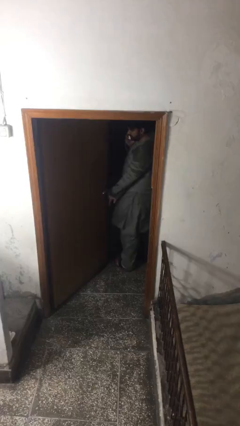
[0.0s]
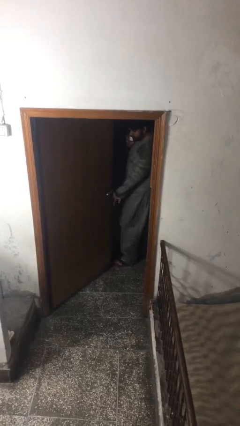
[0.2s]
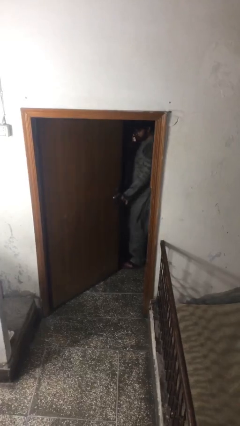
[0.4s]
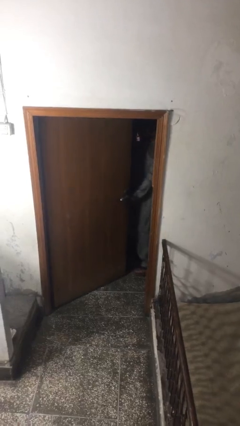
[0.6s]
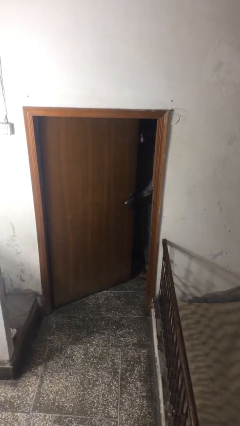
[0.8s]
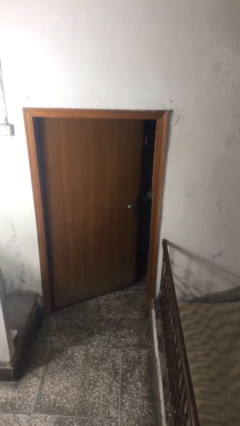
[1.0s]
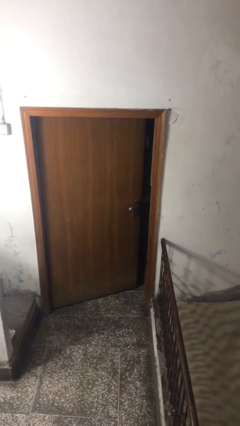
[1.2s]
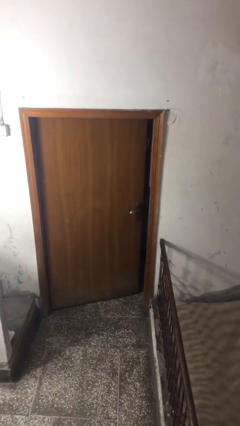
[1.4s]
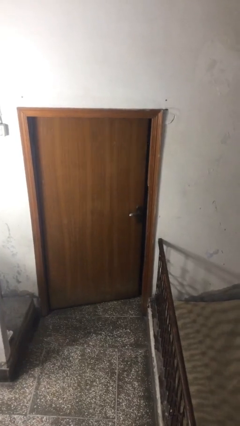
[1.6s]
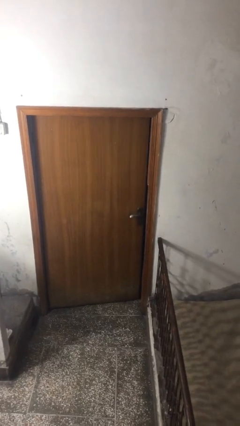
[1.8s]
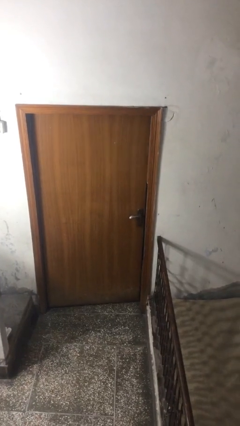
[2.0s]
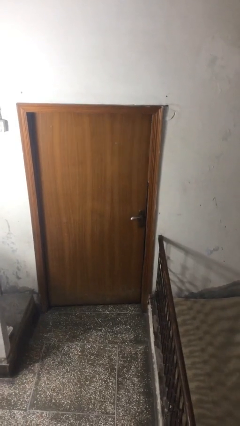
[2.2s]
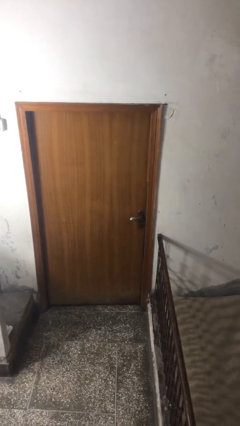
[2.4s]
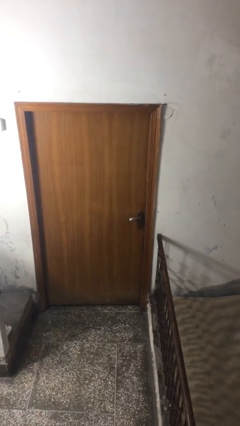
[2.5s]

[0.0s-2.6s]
person closes facility door

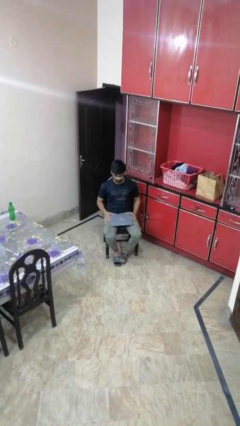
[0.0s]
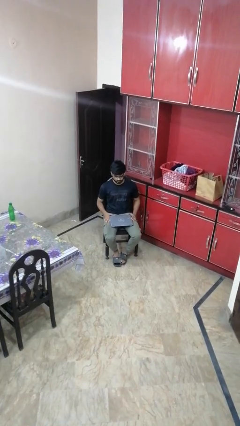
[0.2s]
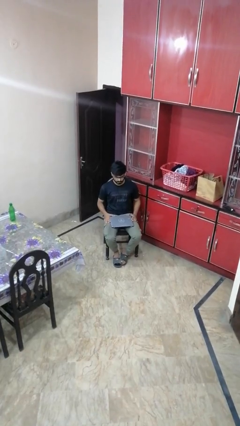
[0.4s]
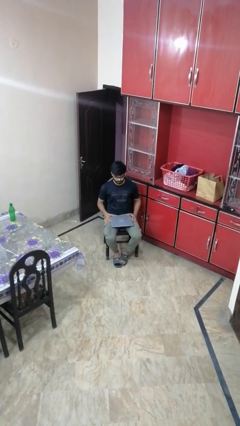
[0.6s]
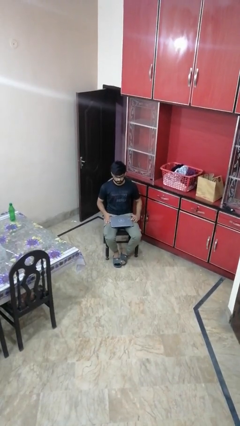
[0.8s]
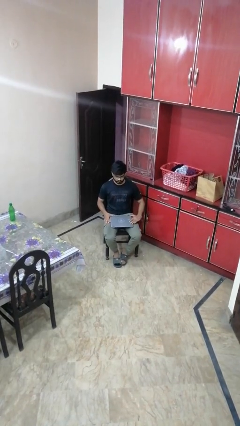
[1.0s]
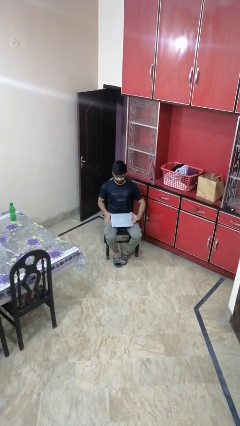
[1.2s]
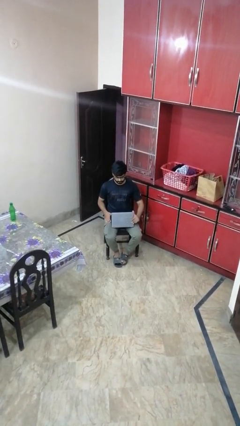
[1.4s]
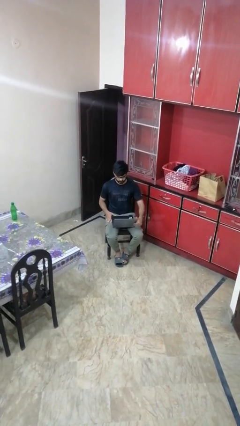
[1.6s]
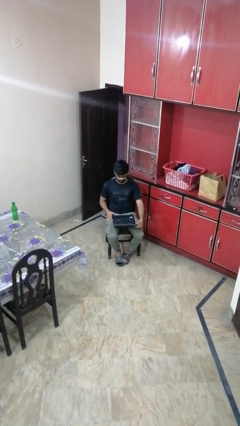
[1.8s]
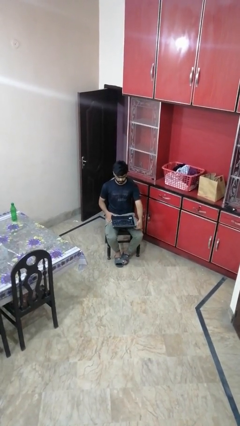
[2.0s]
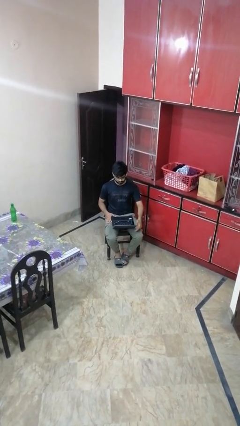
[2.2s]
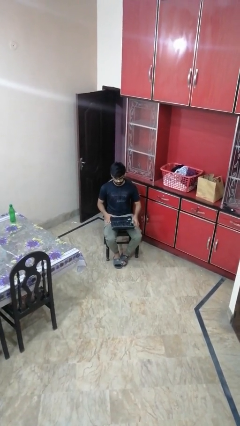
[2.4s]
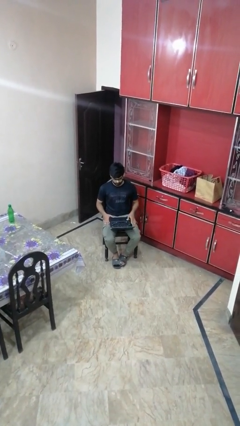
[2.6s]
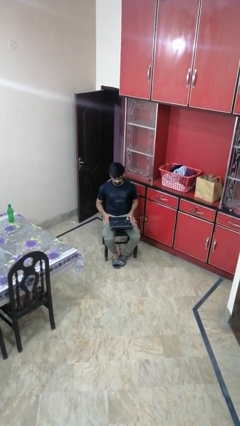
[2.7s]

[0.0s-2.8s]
person opens laptop

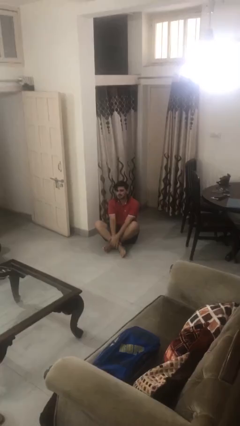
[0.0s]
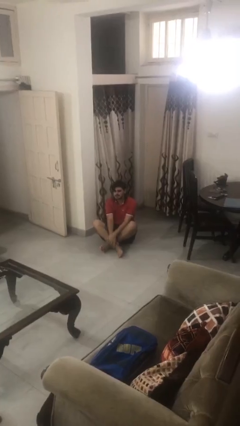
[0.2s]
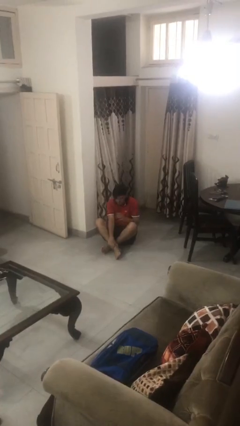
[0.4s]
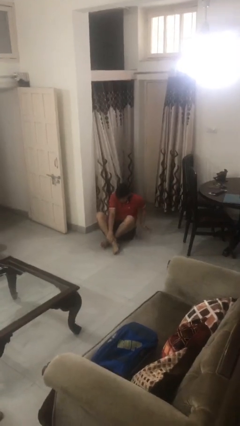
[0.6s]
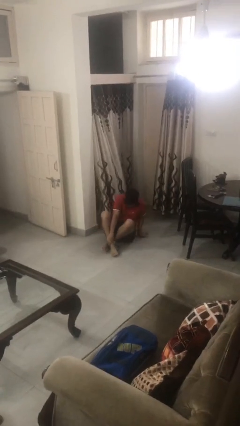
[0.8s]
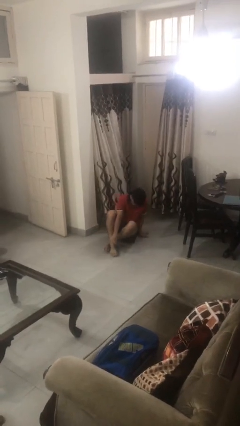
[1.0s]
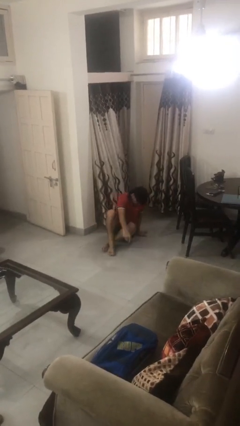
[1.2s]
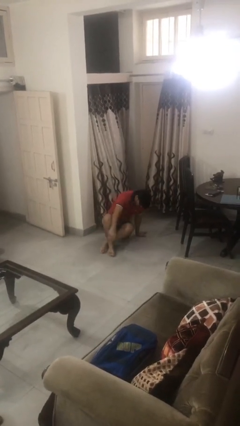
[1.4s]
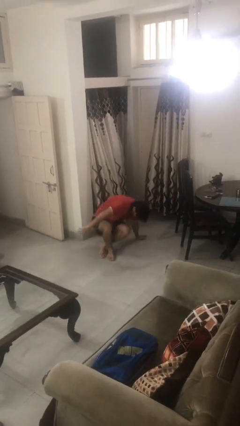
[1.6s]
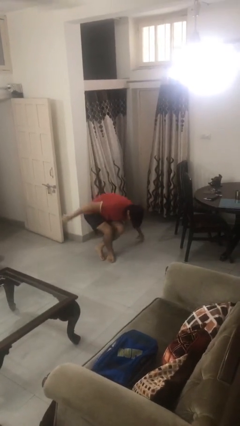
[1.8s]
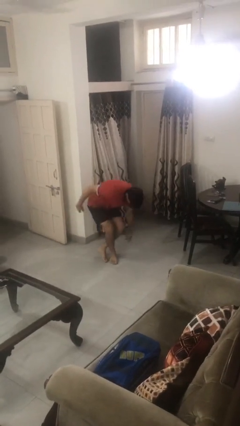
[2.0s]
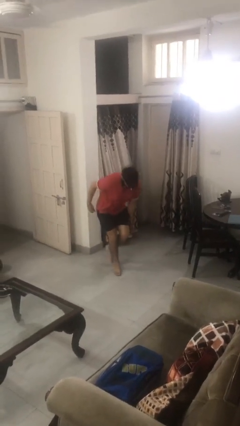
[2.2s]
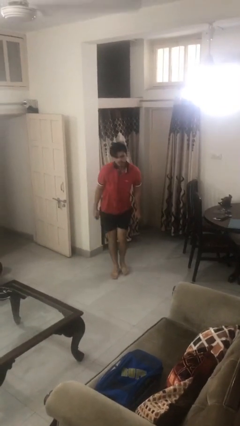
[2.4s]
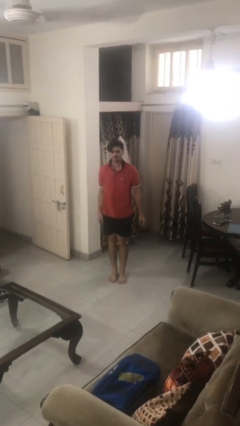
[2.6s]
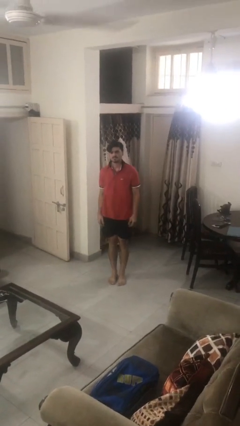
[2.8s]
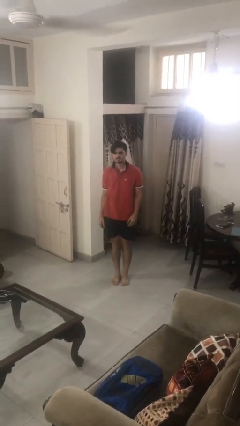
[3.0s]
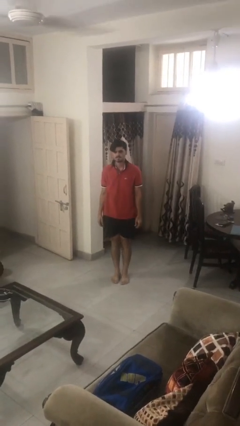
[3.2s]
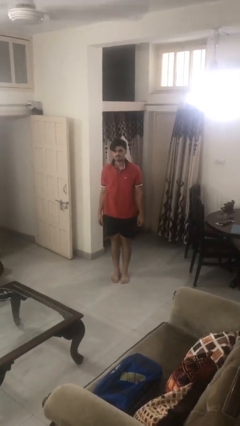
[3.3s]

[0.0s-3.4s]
person stands up from floor

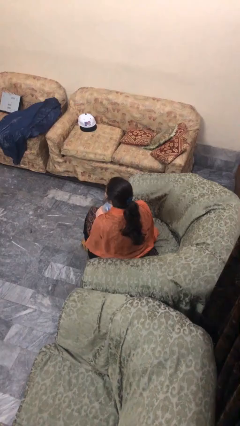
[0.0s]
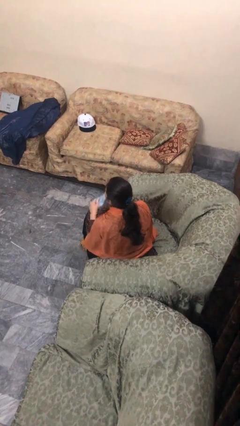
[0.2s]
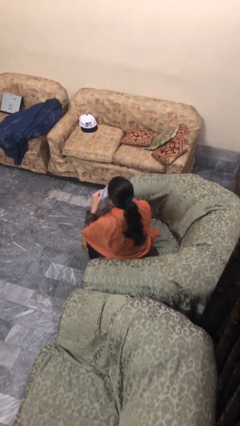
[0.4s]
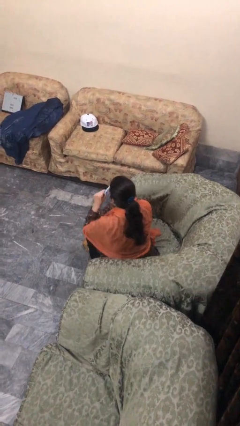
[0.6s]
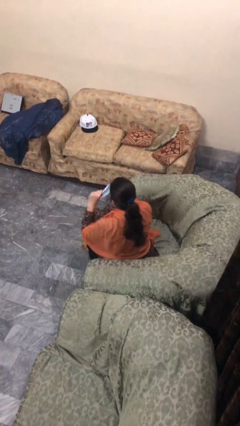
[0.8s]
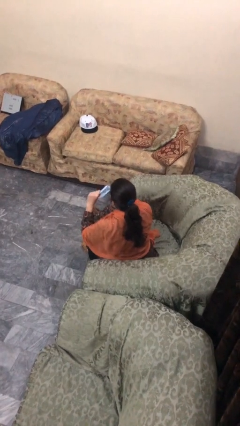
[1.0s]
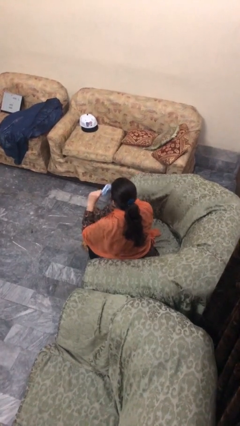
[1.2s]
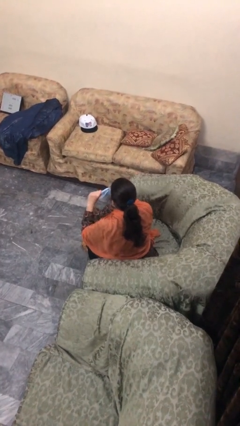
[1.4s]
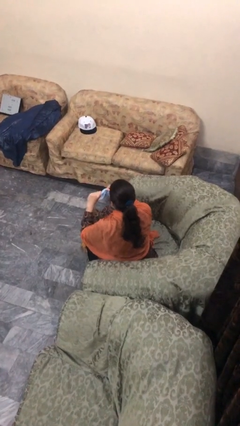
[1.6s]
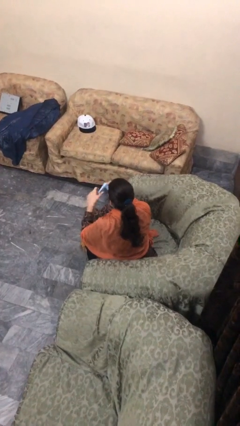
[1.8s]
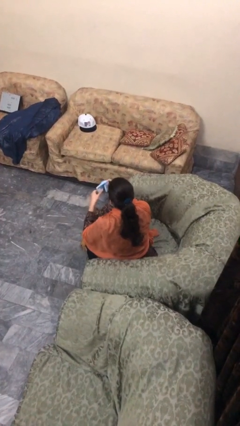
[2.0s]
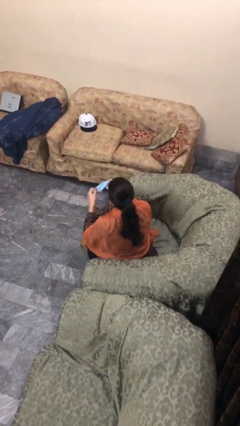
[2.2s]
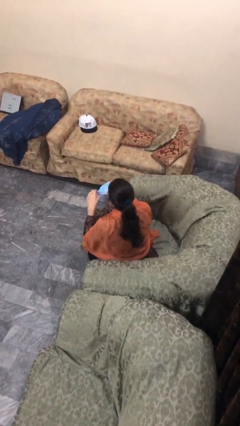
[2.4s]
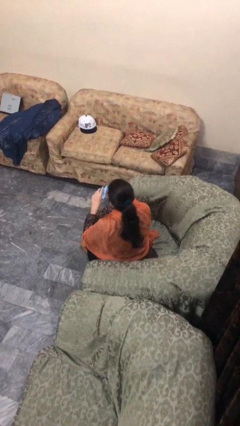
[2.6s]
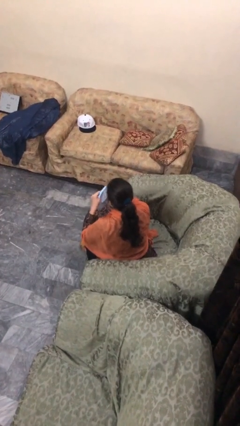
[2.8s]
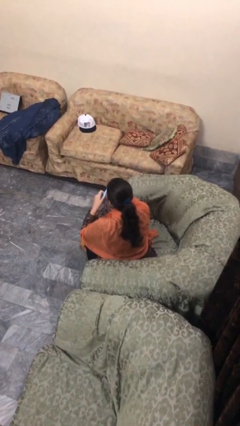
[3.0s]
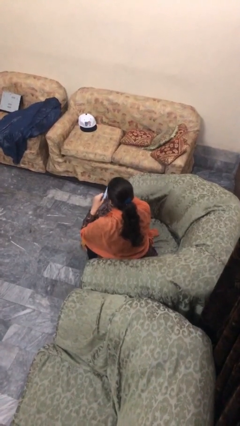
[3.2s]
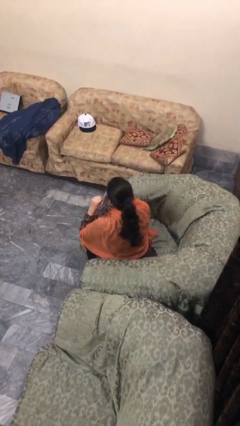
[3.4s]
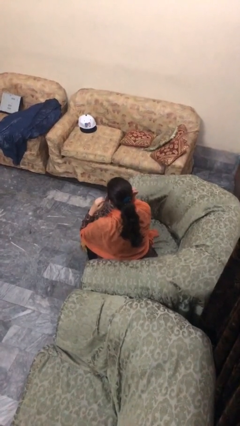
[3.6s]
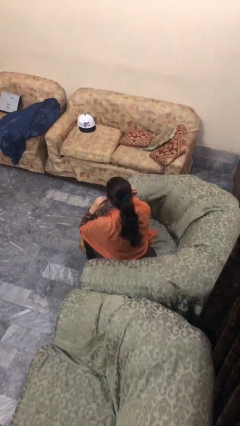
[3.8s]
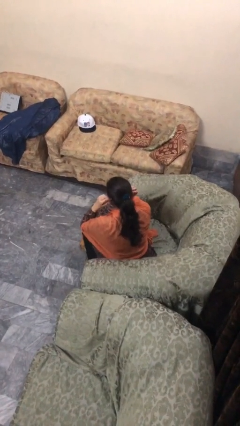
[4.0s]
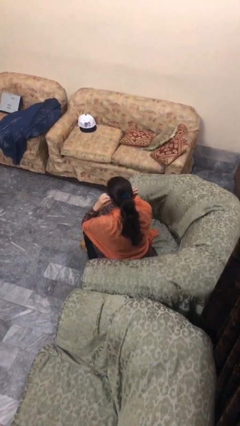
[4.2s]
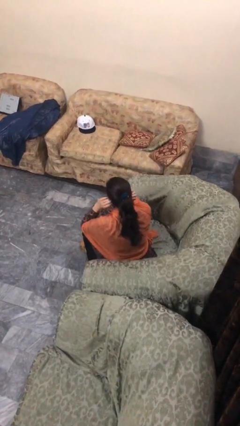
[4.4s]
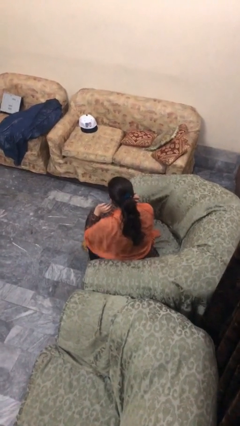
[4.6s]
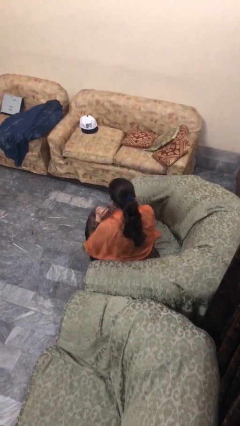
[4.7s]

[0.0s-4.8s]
person puts on facemask

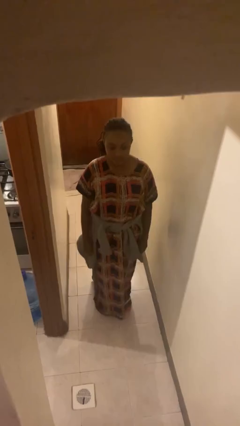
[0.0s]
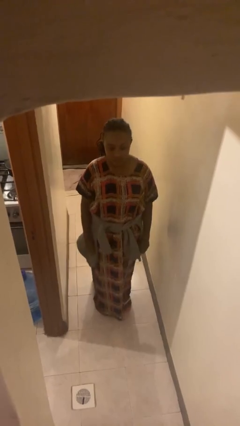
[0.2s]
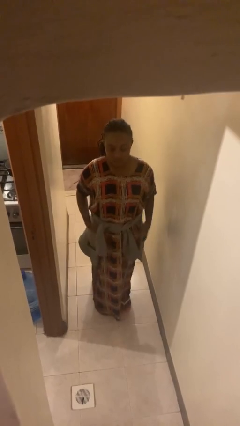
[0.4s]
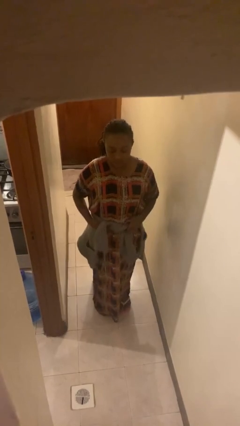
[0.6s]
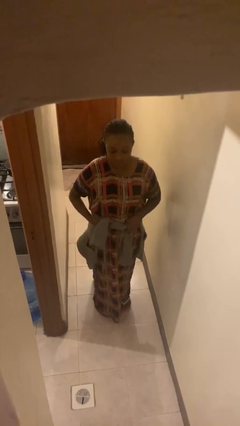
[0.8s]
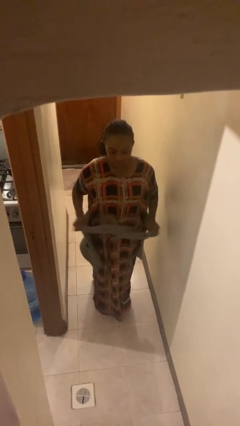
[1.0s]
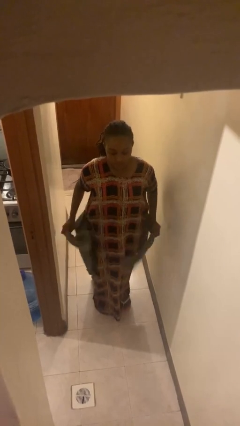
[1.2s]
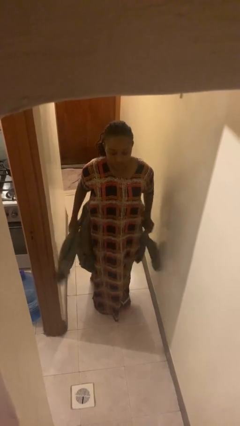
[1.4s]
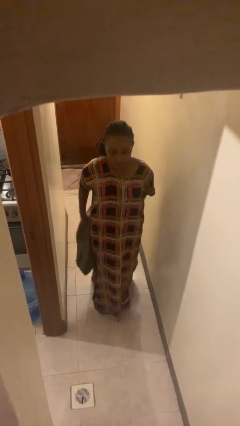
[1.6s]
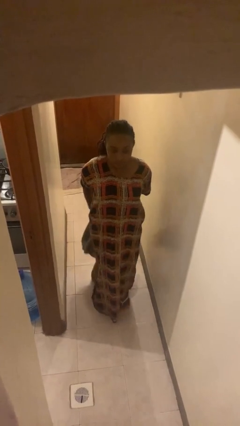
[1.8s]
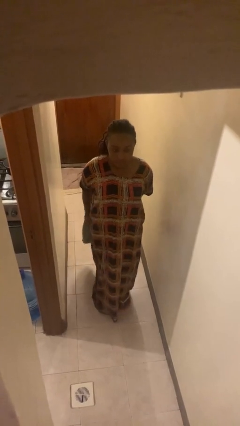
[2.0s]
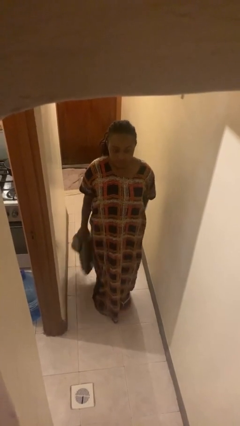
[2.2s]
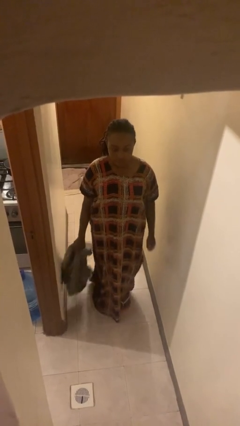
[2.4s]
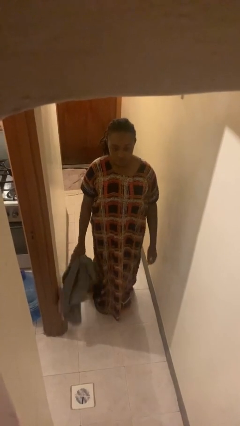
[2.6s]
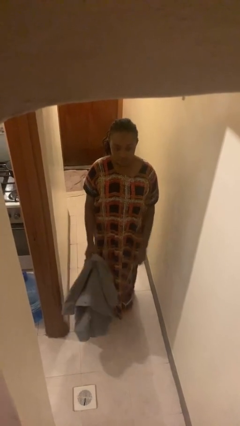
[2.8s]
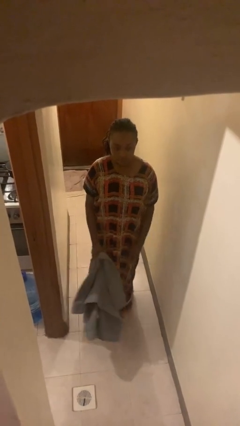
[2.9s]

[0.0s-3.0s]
person unties jacket around waist

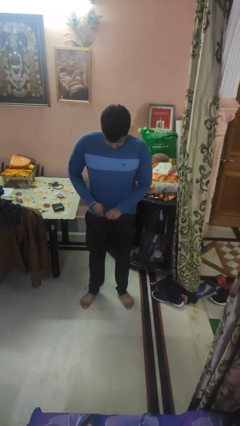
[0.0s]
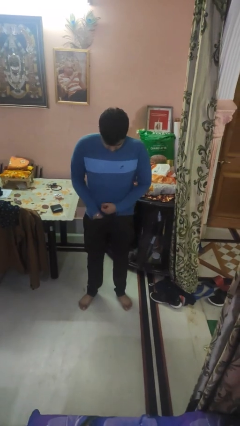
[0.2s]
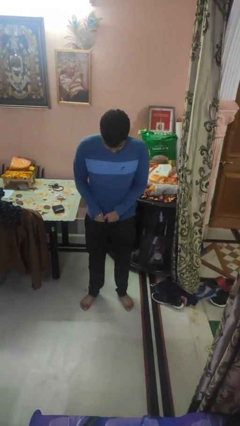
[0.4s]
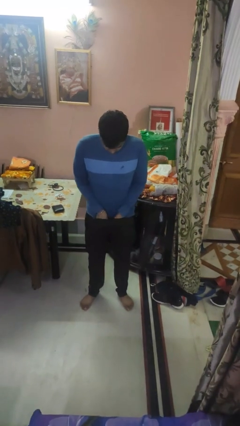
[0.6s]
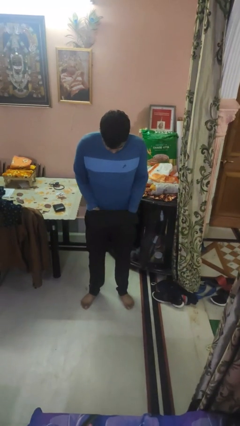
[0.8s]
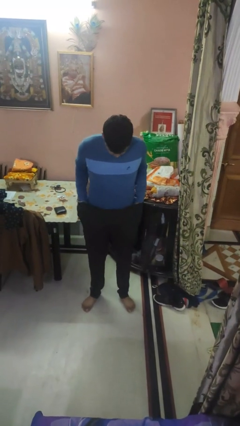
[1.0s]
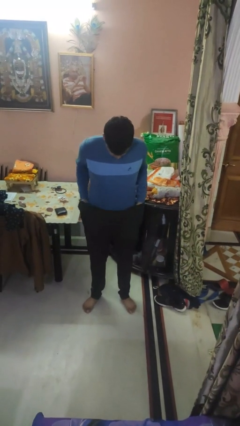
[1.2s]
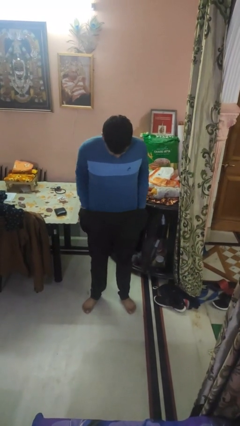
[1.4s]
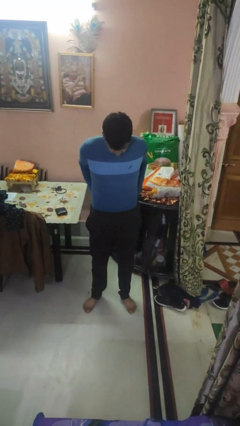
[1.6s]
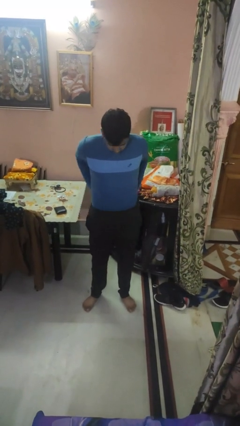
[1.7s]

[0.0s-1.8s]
person tucks in shirt
